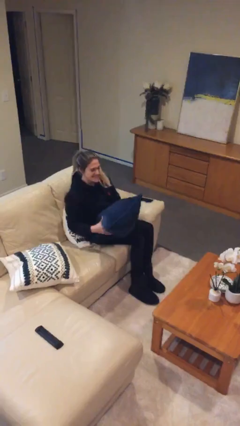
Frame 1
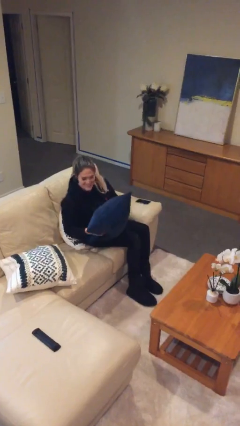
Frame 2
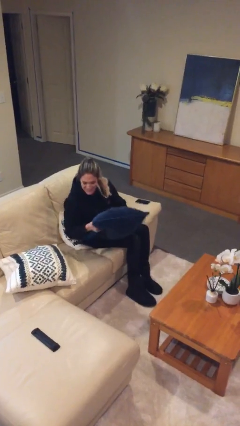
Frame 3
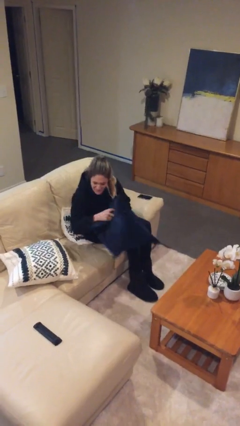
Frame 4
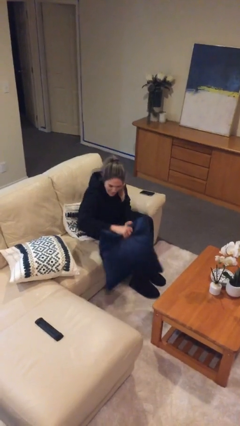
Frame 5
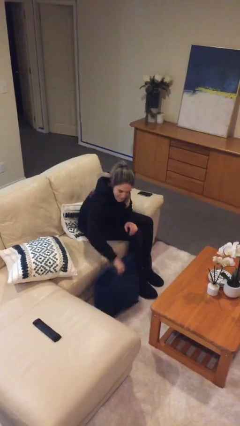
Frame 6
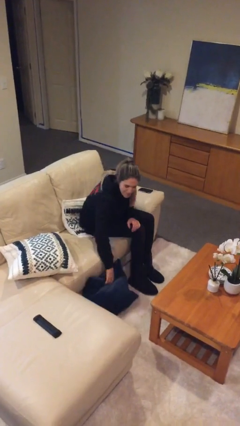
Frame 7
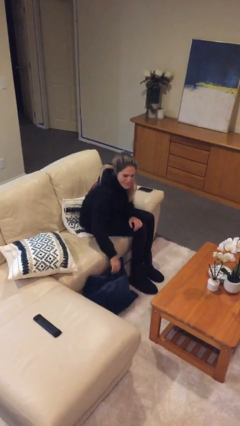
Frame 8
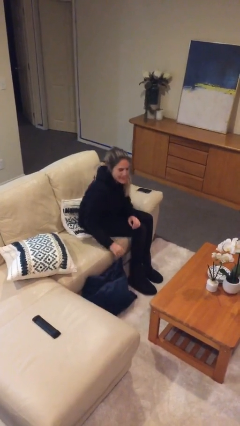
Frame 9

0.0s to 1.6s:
person puts down object on floor

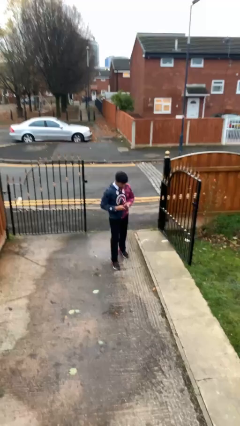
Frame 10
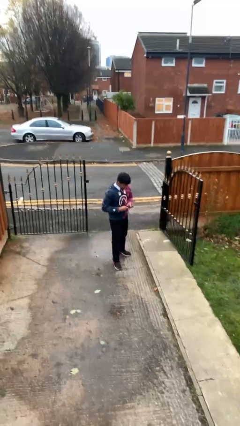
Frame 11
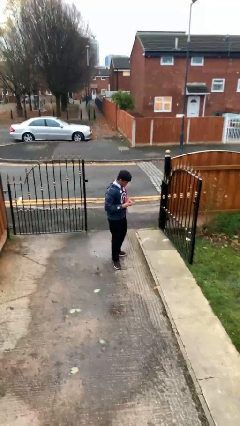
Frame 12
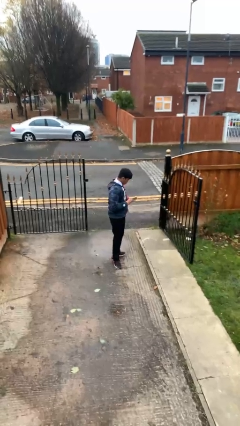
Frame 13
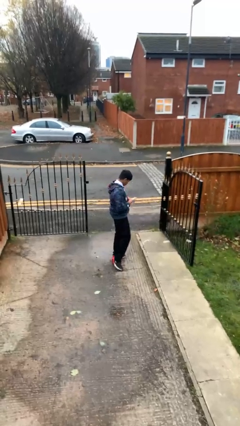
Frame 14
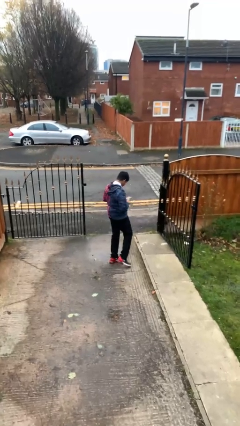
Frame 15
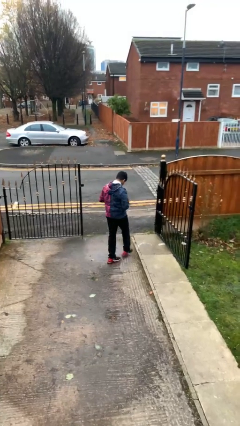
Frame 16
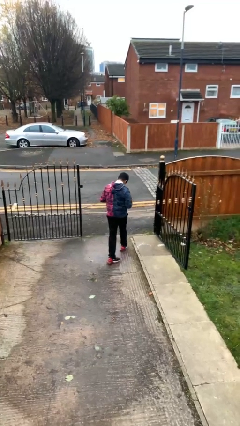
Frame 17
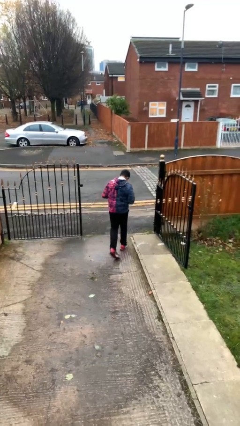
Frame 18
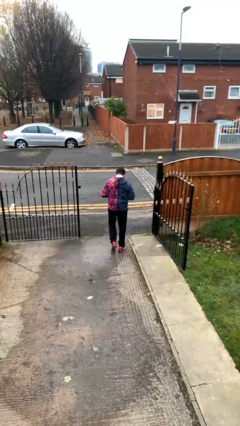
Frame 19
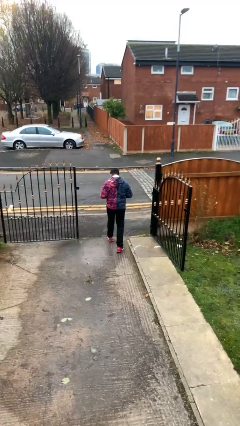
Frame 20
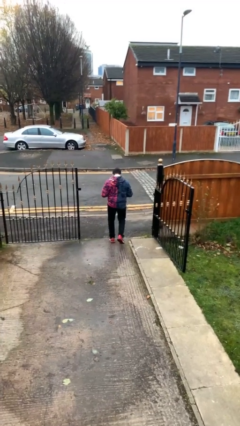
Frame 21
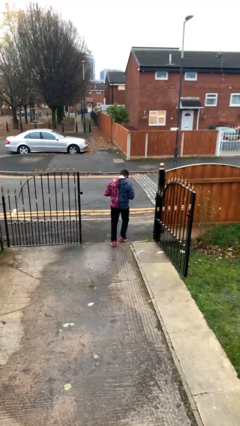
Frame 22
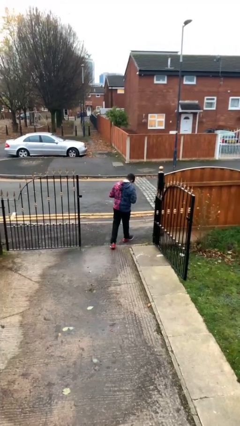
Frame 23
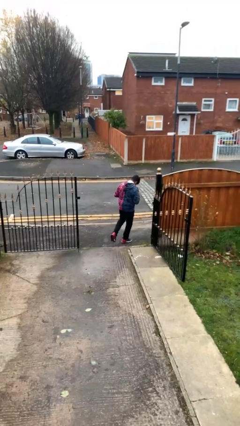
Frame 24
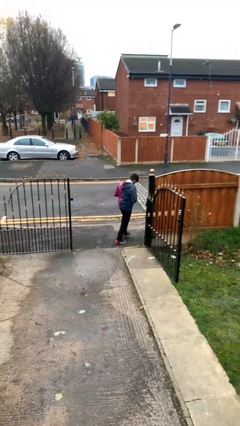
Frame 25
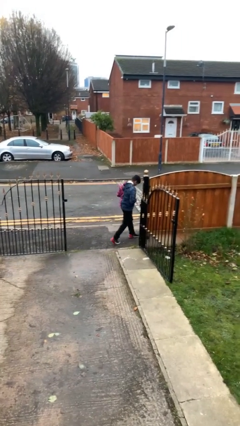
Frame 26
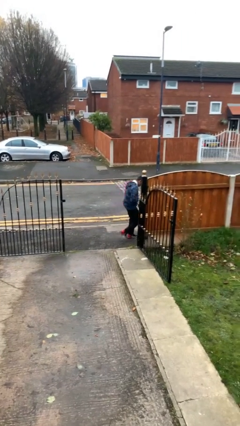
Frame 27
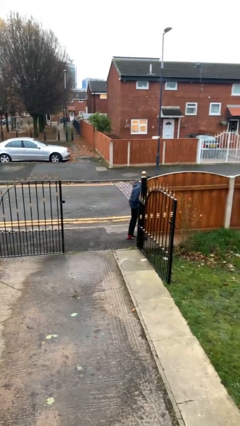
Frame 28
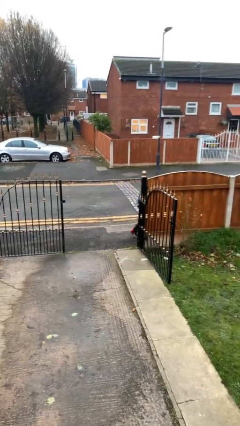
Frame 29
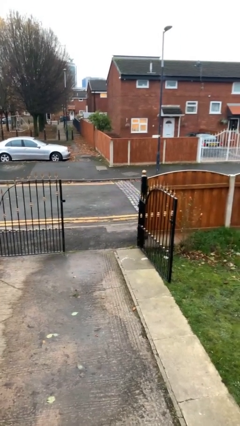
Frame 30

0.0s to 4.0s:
person exits scene through structure

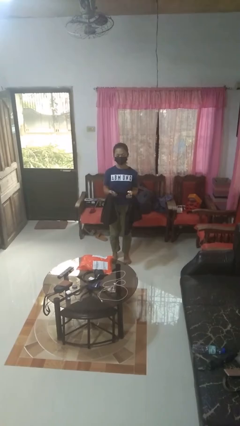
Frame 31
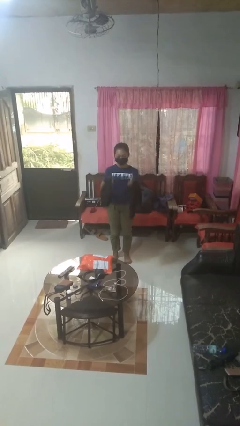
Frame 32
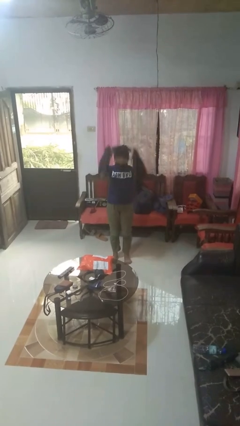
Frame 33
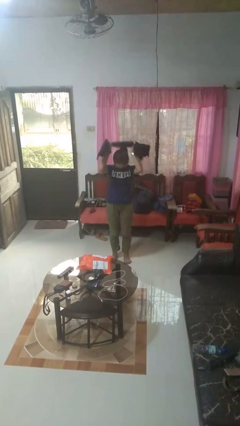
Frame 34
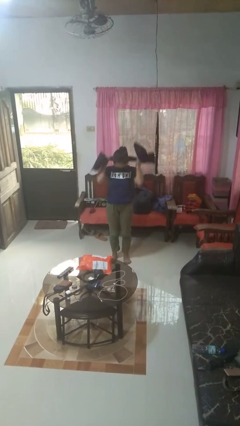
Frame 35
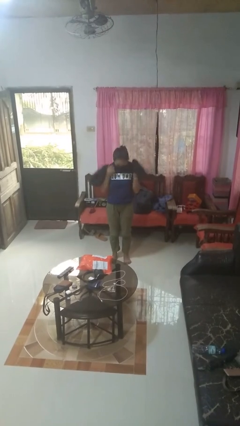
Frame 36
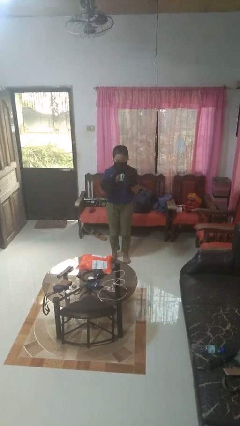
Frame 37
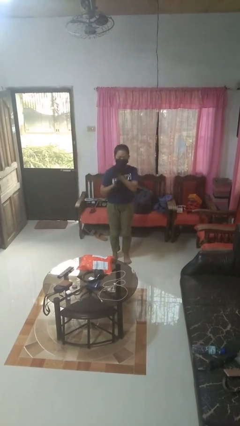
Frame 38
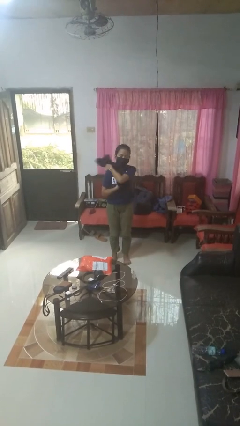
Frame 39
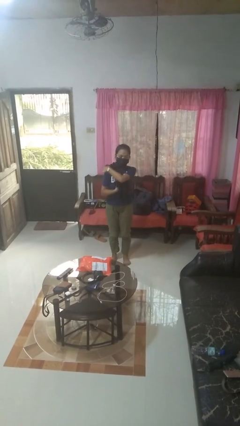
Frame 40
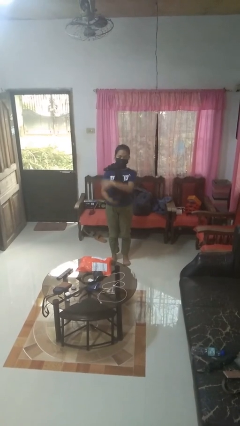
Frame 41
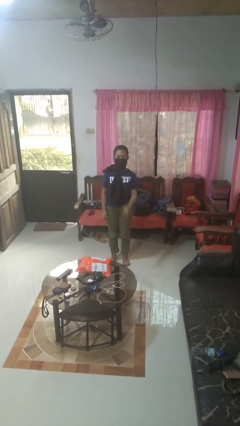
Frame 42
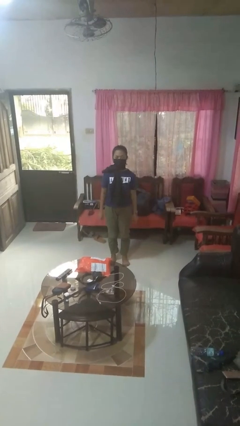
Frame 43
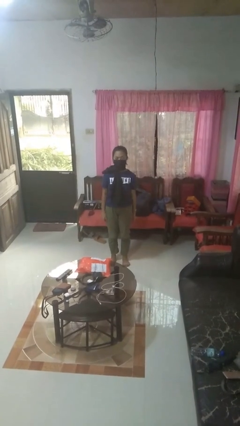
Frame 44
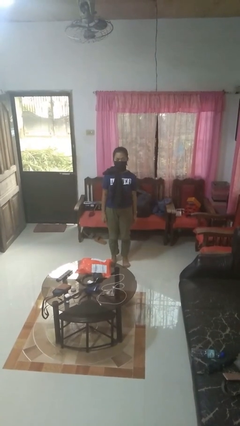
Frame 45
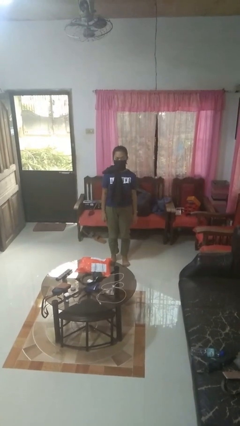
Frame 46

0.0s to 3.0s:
person puts on scarf

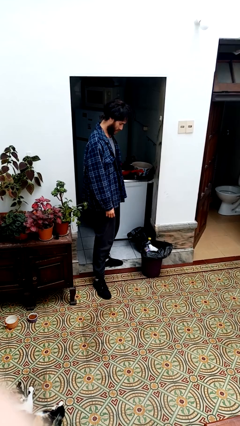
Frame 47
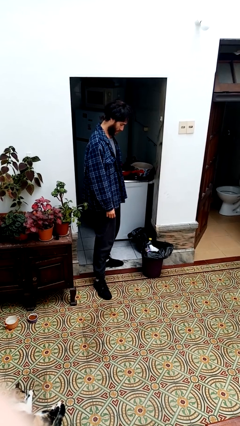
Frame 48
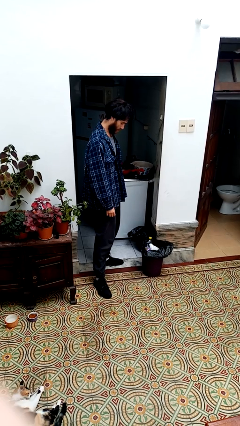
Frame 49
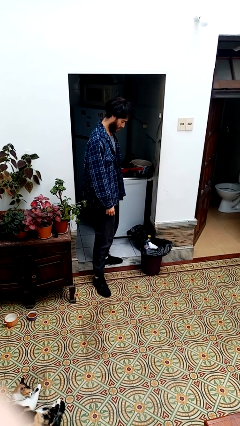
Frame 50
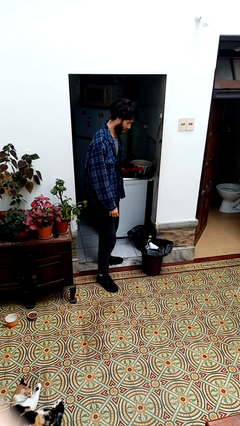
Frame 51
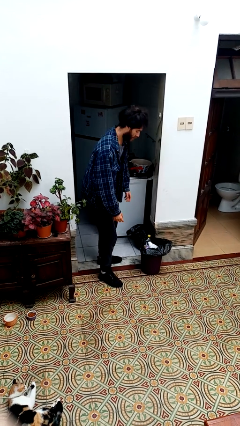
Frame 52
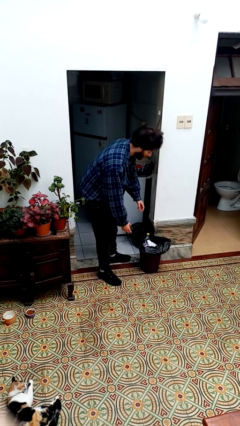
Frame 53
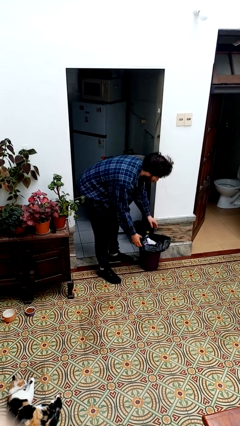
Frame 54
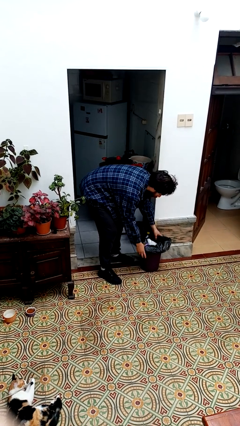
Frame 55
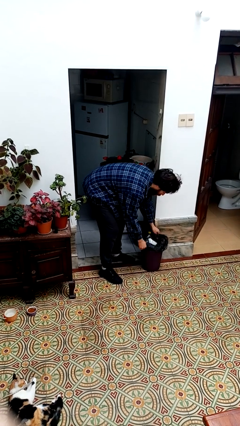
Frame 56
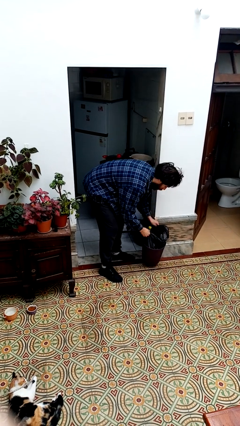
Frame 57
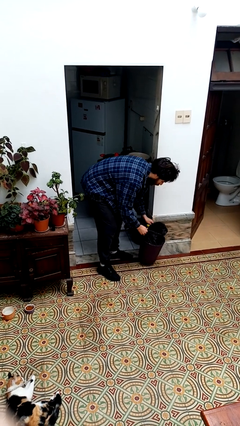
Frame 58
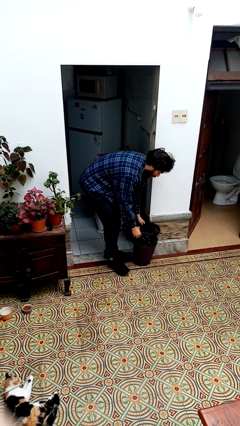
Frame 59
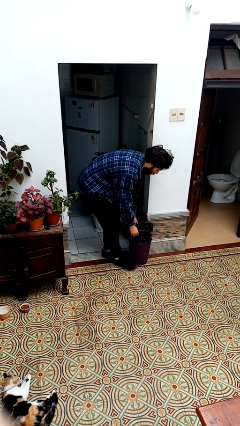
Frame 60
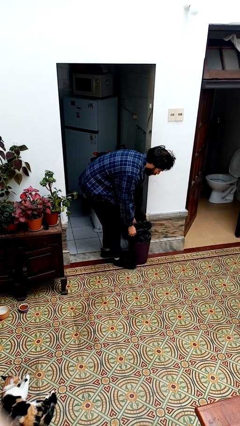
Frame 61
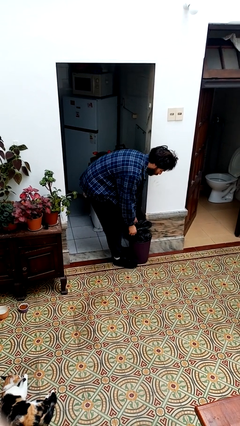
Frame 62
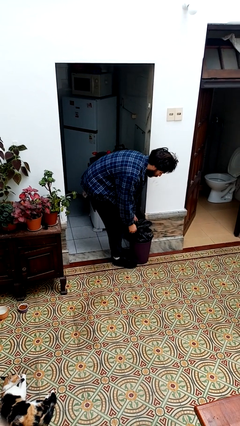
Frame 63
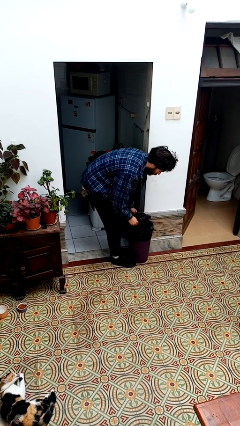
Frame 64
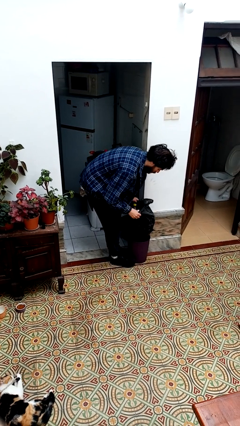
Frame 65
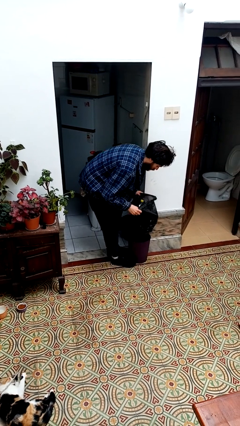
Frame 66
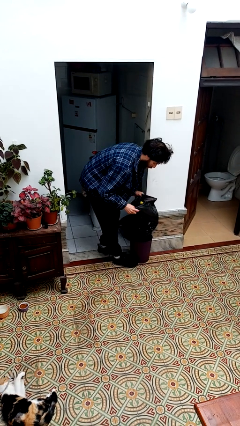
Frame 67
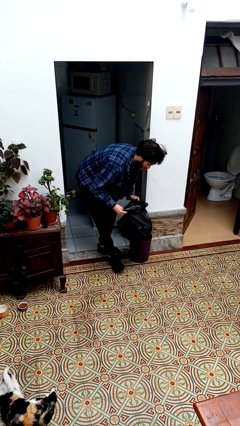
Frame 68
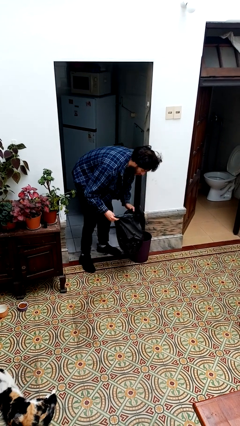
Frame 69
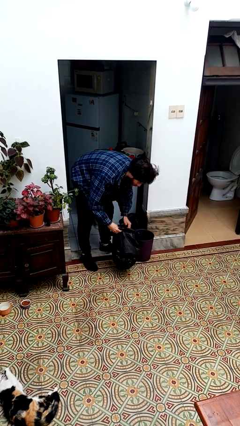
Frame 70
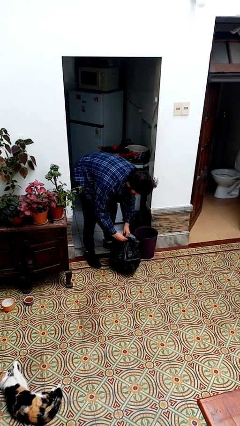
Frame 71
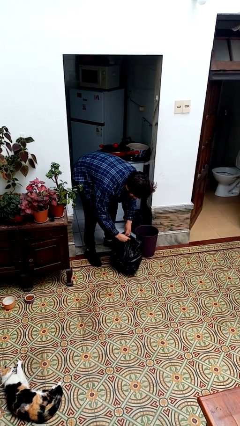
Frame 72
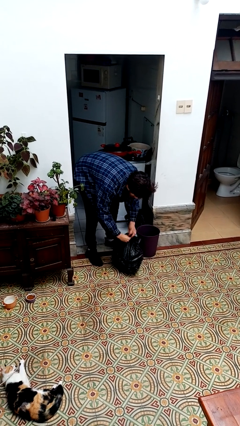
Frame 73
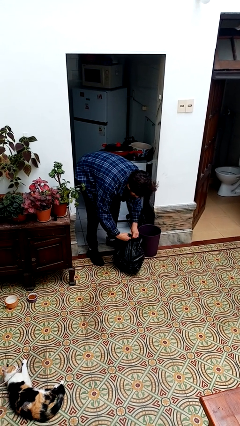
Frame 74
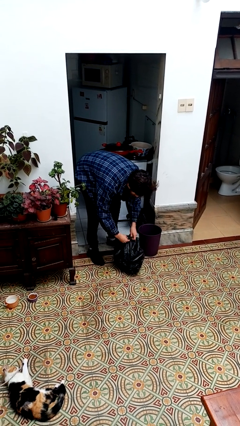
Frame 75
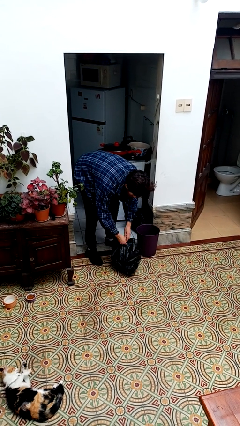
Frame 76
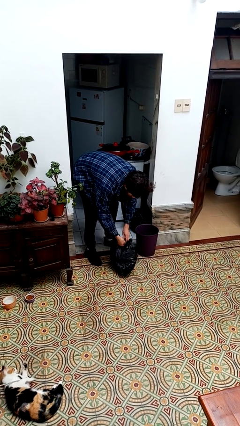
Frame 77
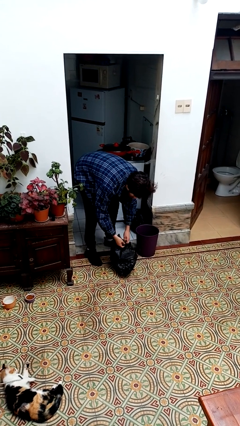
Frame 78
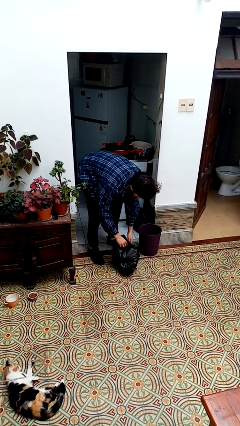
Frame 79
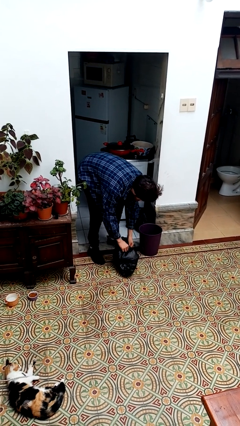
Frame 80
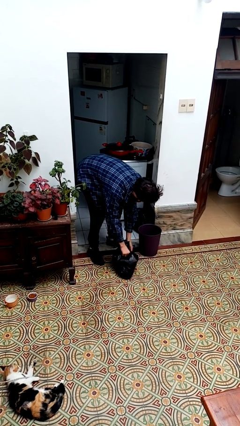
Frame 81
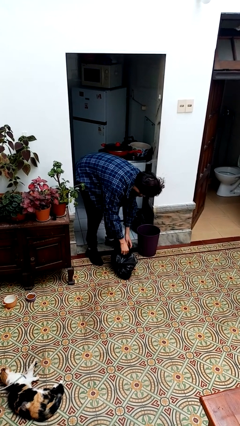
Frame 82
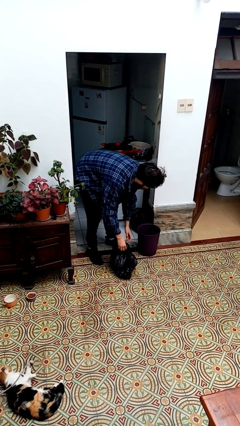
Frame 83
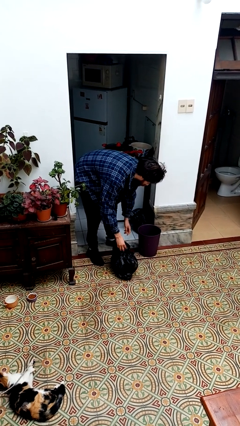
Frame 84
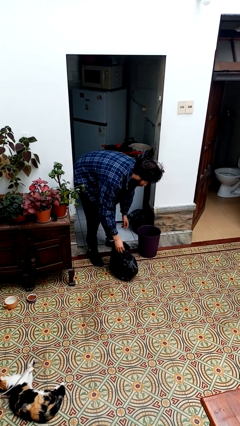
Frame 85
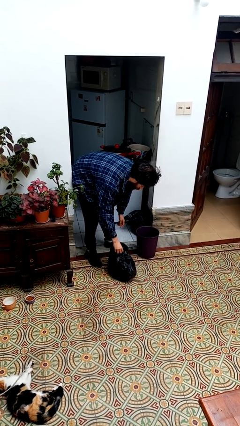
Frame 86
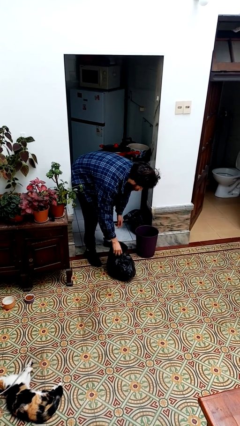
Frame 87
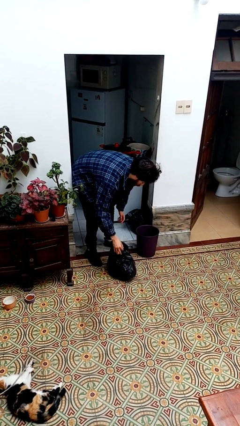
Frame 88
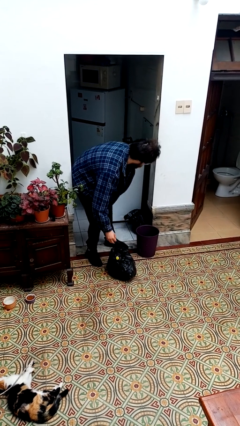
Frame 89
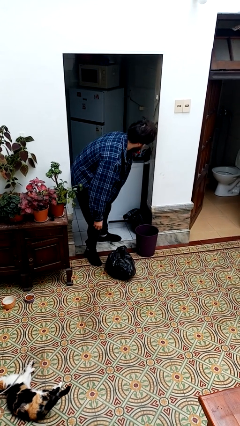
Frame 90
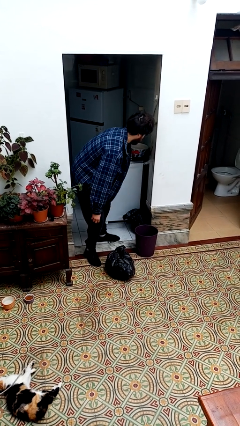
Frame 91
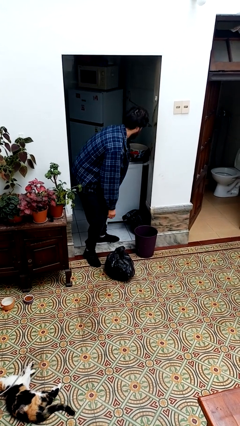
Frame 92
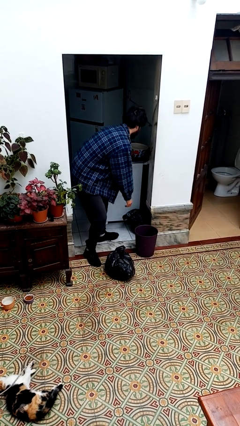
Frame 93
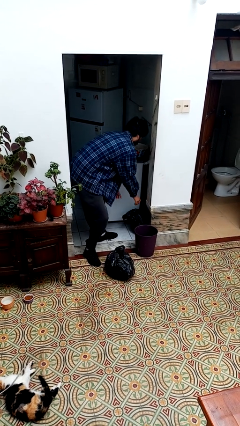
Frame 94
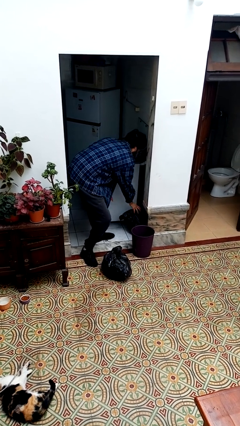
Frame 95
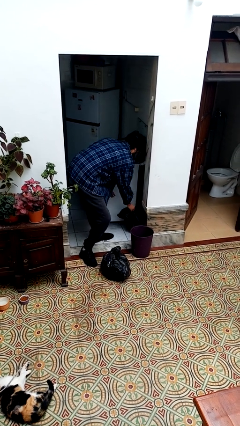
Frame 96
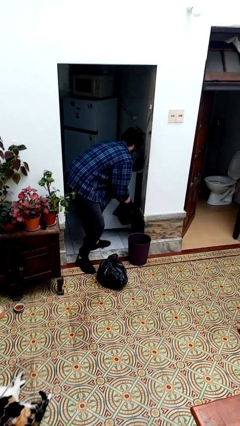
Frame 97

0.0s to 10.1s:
person removes trashbag from trashcan
